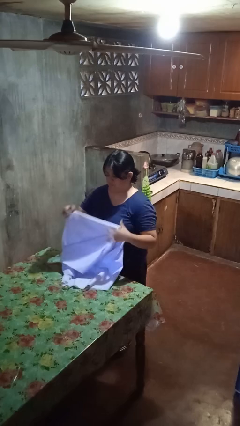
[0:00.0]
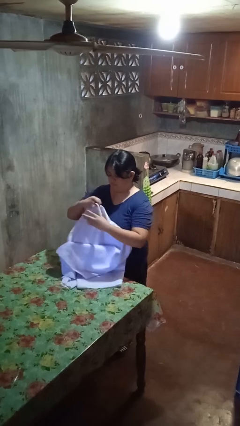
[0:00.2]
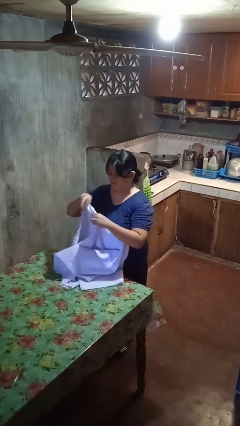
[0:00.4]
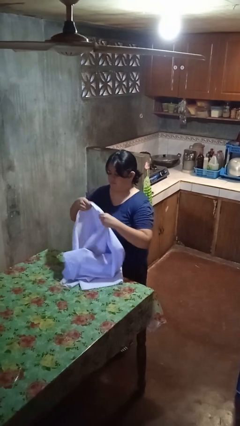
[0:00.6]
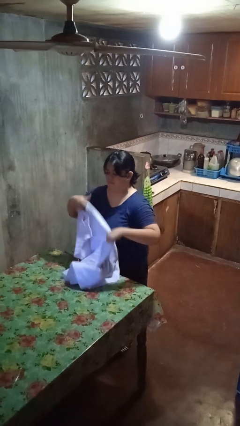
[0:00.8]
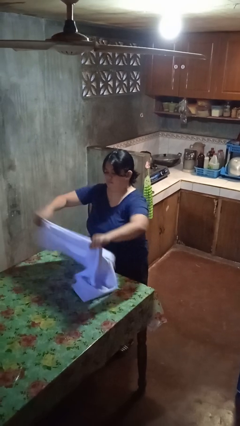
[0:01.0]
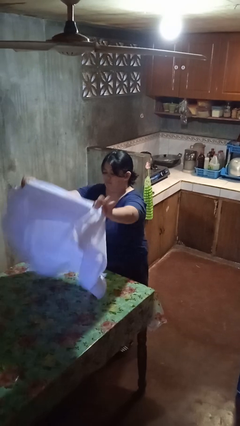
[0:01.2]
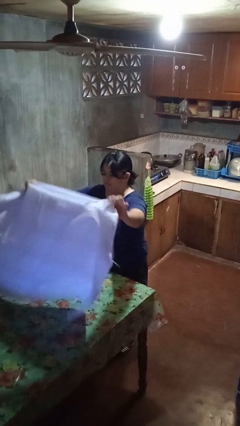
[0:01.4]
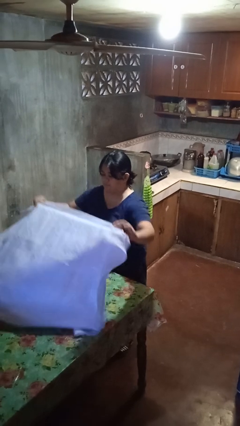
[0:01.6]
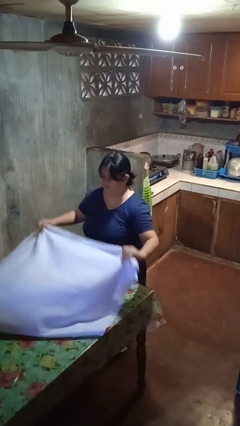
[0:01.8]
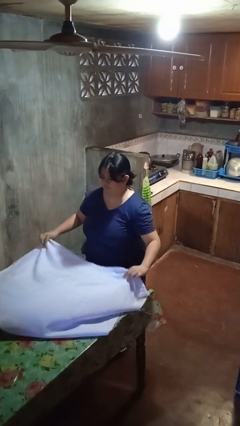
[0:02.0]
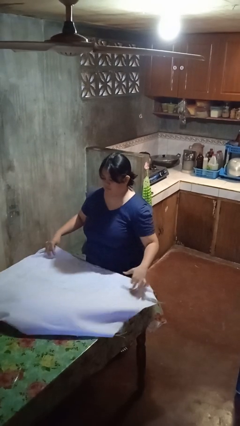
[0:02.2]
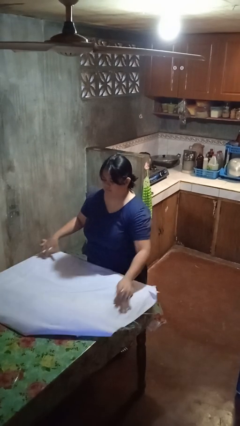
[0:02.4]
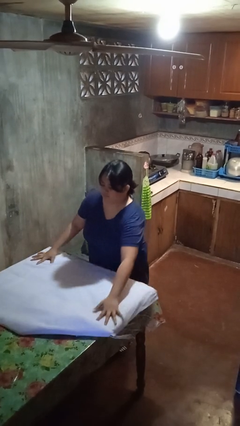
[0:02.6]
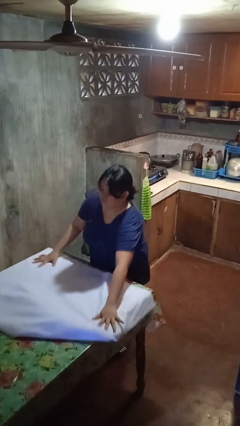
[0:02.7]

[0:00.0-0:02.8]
person spreads tablecloth

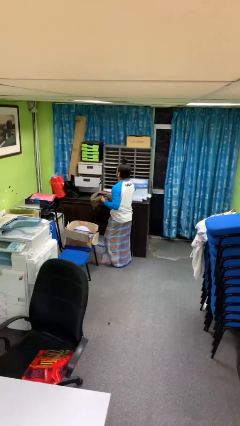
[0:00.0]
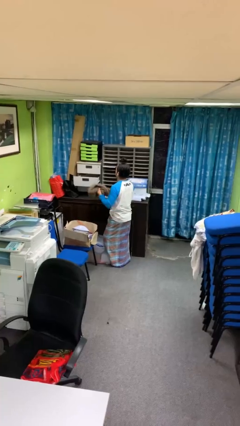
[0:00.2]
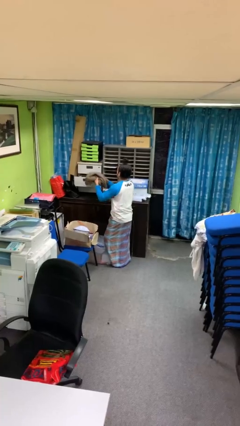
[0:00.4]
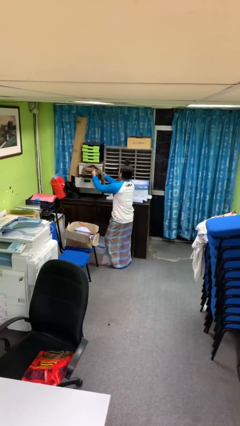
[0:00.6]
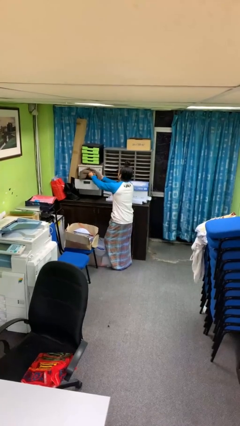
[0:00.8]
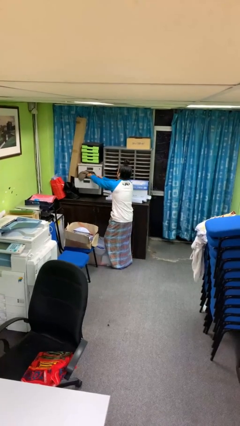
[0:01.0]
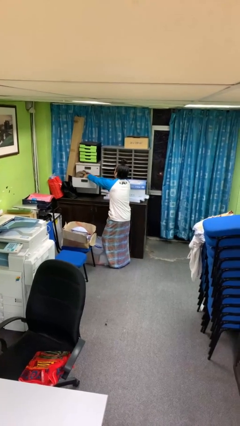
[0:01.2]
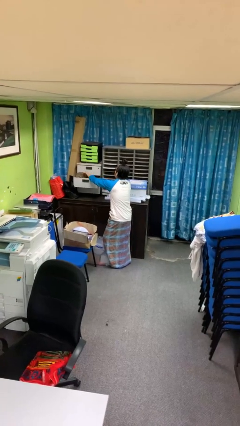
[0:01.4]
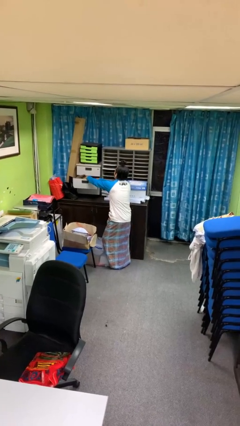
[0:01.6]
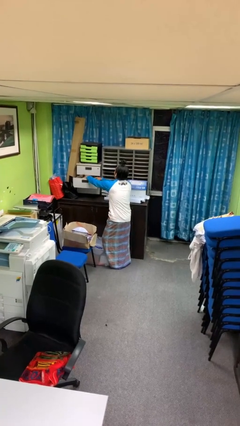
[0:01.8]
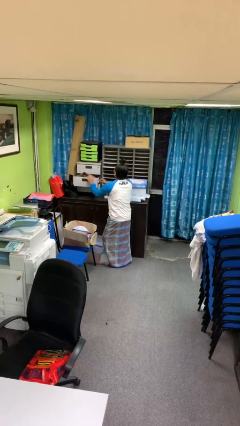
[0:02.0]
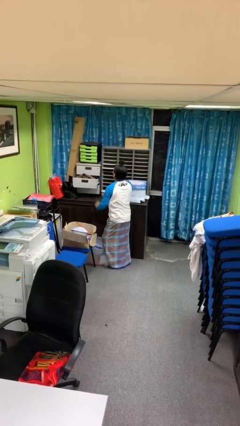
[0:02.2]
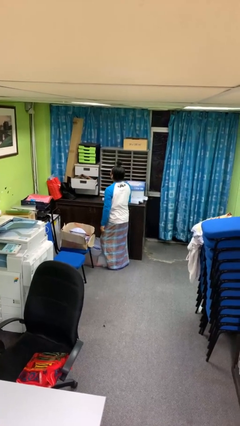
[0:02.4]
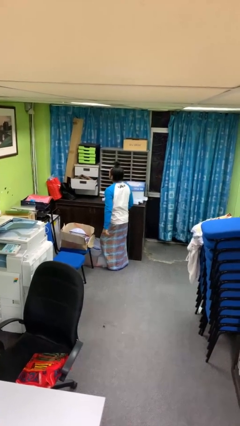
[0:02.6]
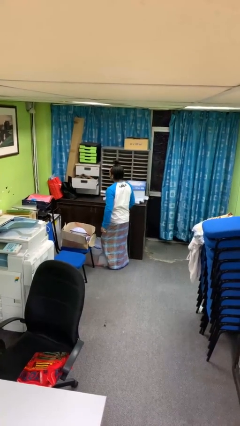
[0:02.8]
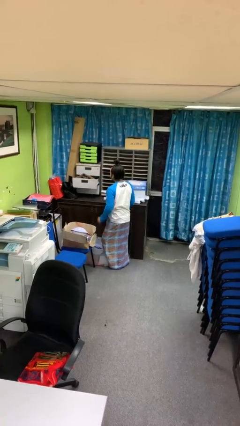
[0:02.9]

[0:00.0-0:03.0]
person puts clothes into dresser

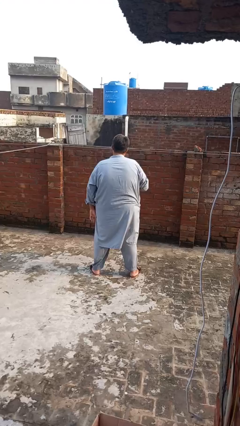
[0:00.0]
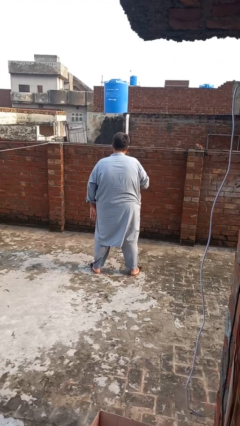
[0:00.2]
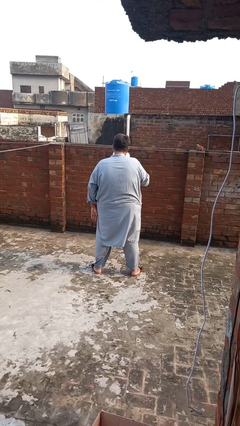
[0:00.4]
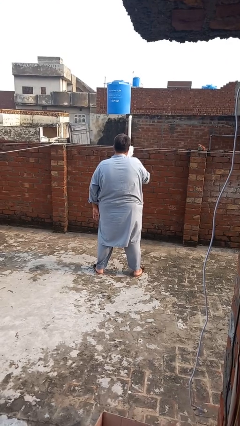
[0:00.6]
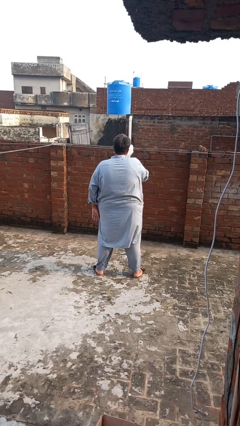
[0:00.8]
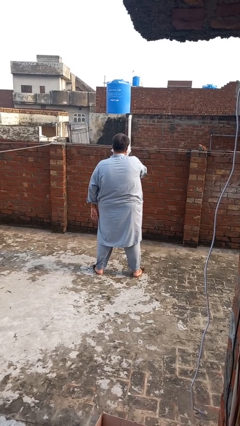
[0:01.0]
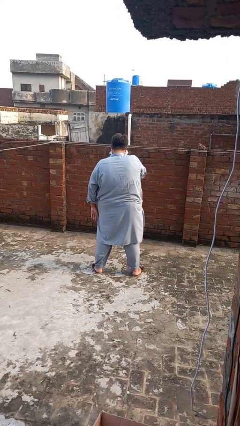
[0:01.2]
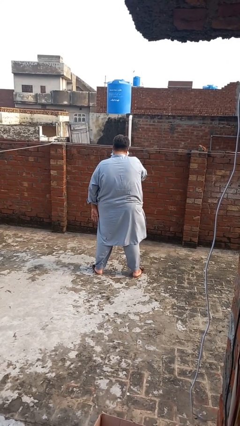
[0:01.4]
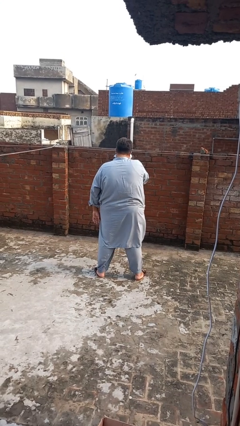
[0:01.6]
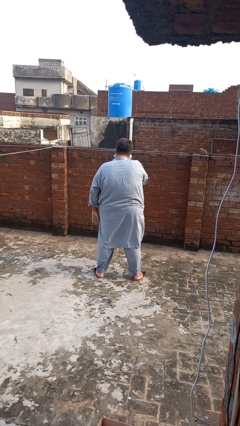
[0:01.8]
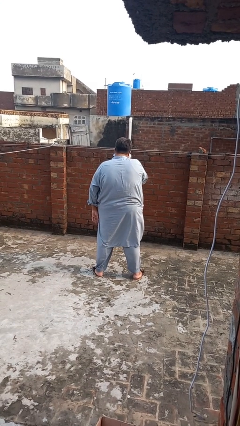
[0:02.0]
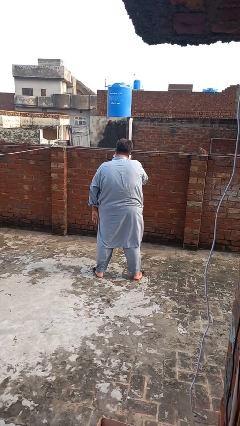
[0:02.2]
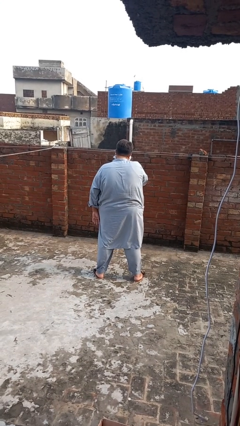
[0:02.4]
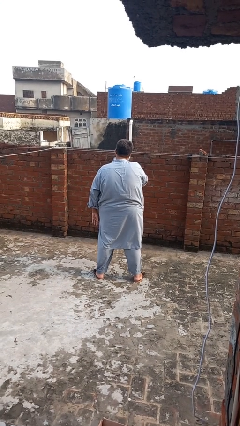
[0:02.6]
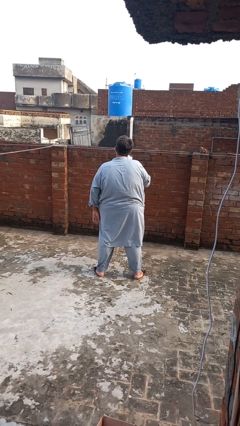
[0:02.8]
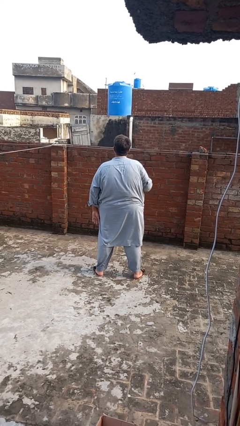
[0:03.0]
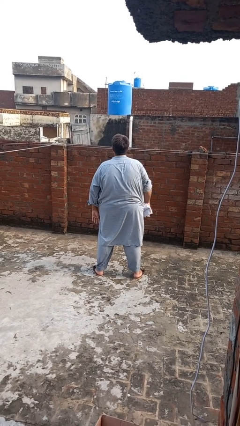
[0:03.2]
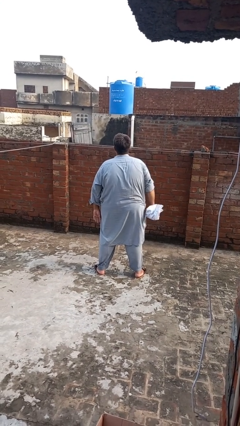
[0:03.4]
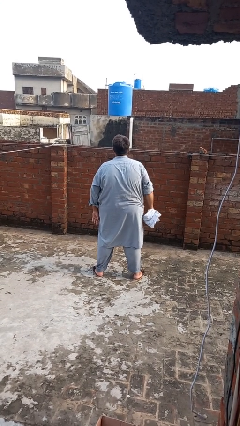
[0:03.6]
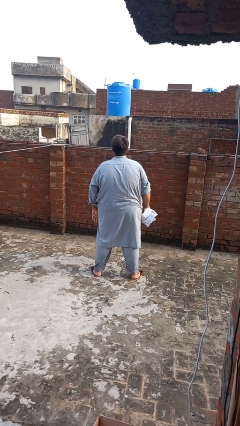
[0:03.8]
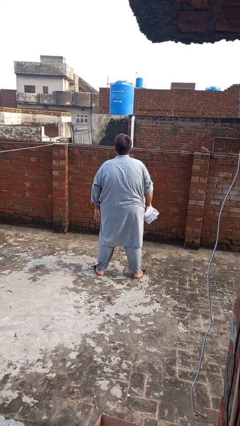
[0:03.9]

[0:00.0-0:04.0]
person blows nose

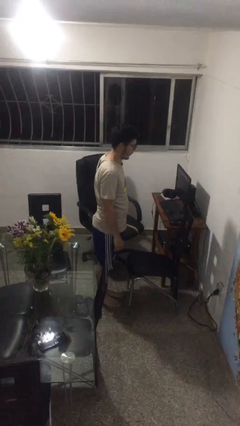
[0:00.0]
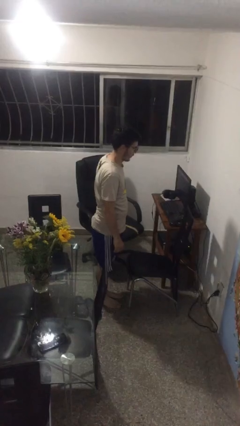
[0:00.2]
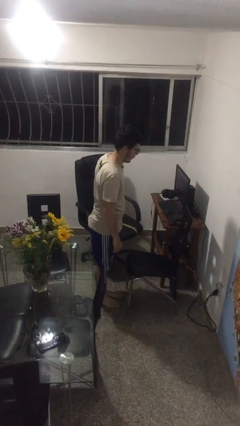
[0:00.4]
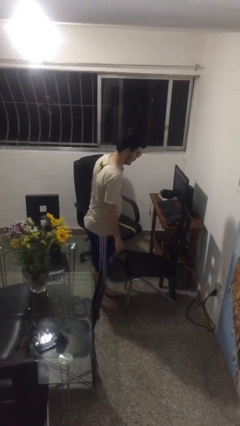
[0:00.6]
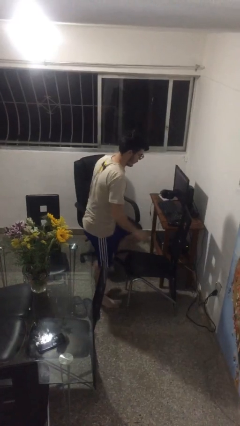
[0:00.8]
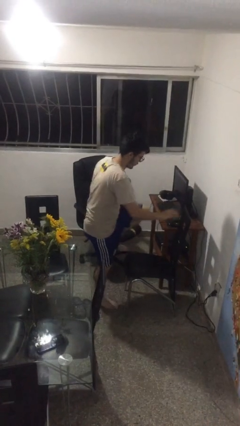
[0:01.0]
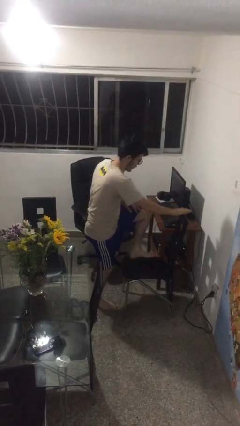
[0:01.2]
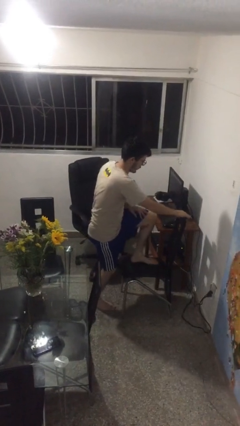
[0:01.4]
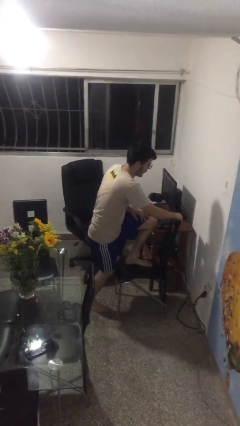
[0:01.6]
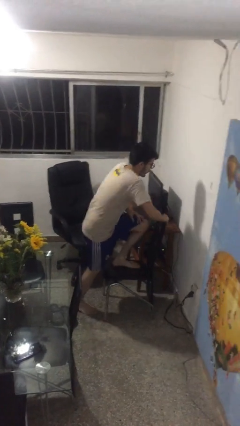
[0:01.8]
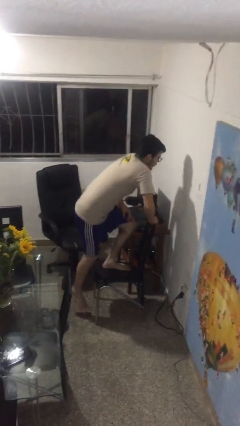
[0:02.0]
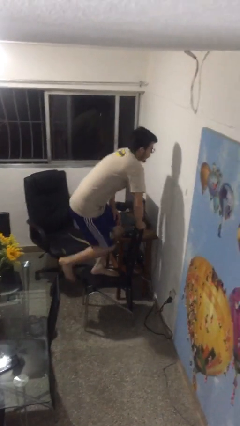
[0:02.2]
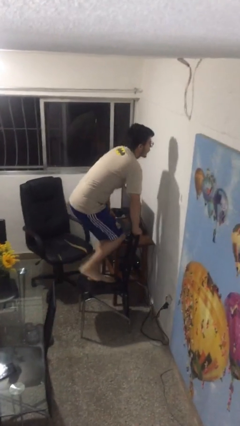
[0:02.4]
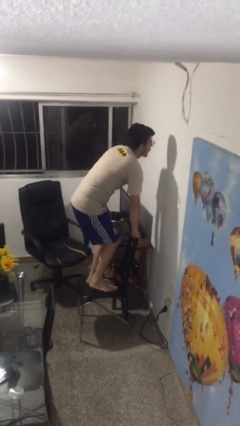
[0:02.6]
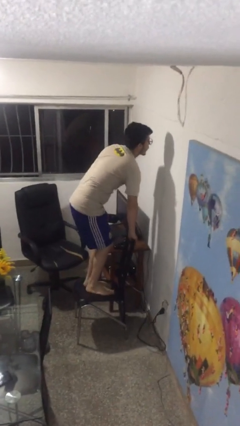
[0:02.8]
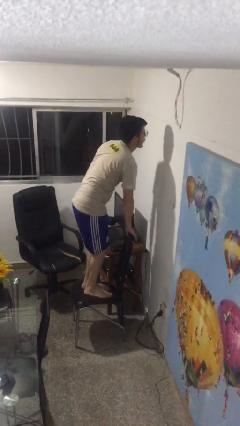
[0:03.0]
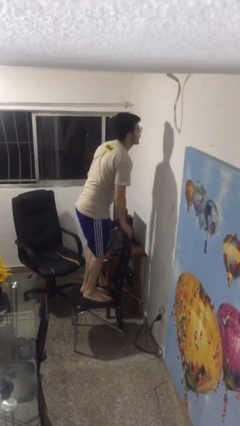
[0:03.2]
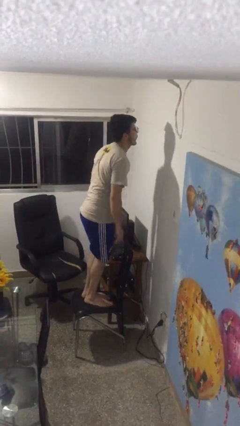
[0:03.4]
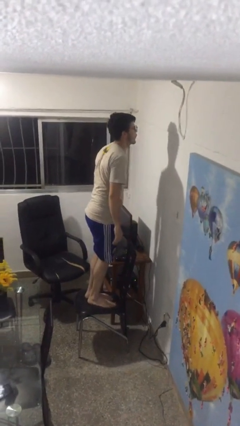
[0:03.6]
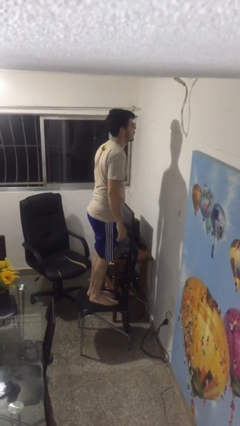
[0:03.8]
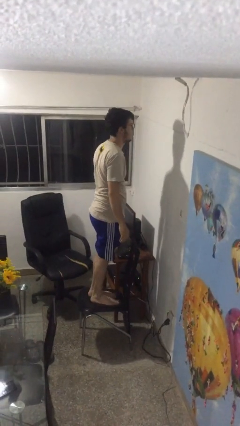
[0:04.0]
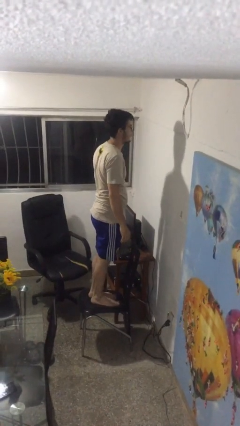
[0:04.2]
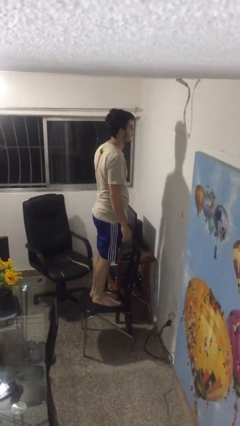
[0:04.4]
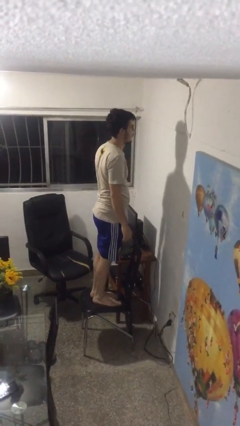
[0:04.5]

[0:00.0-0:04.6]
person climbs on chair

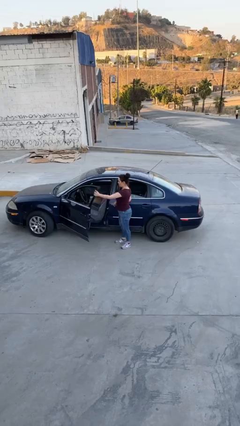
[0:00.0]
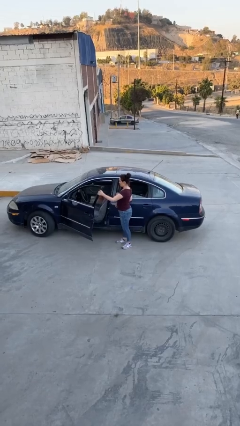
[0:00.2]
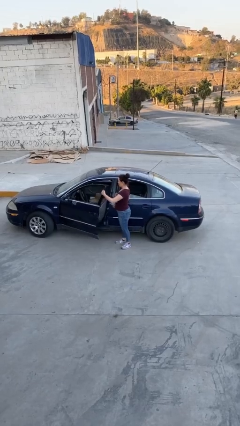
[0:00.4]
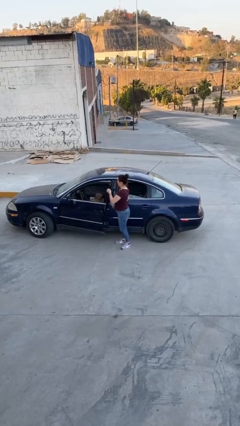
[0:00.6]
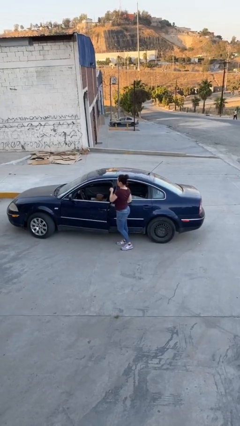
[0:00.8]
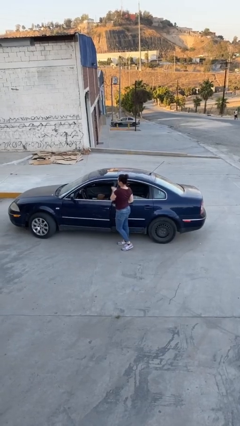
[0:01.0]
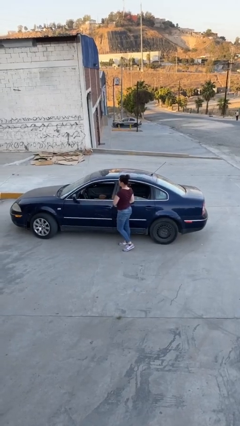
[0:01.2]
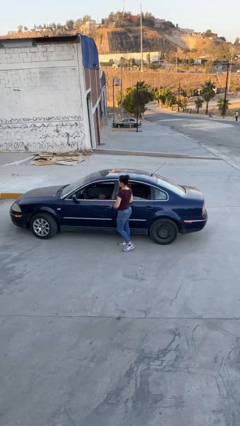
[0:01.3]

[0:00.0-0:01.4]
person closes car door

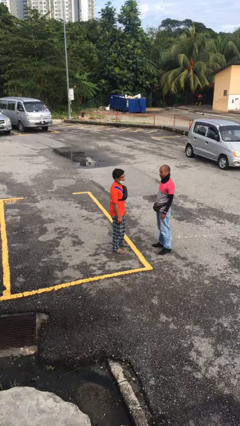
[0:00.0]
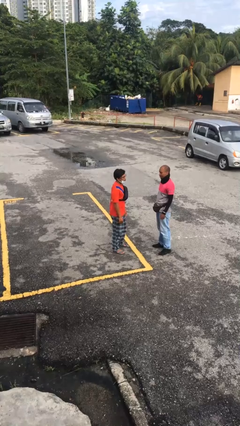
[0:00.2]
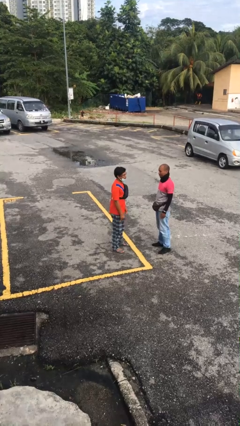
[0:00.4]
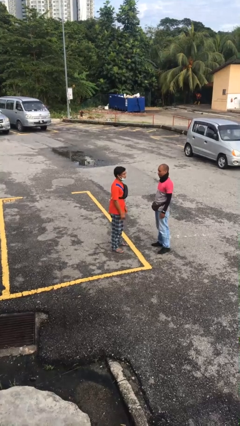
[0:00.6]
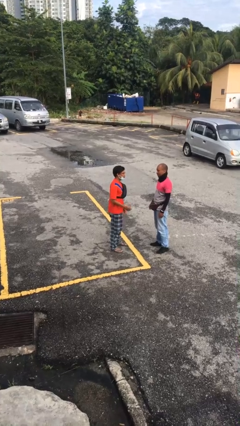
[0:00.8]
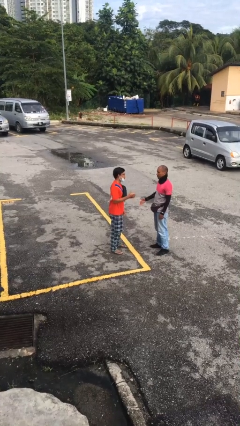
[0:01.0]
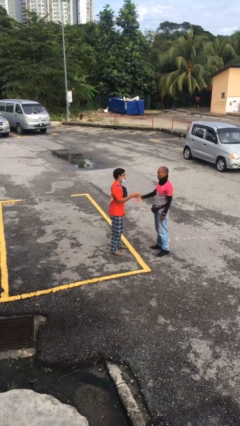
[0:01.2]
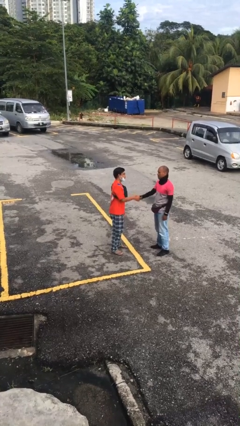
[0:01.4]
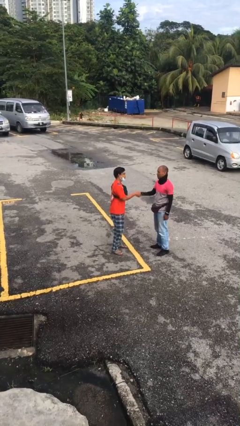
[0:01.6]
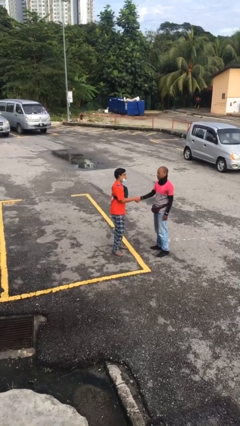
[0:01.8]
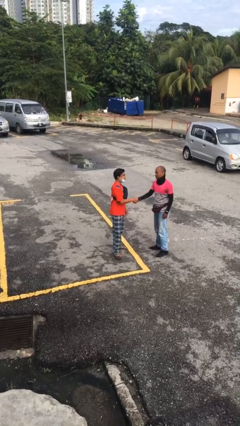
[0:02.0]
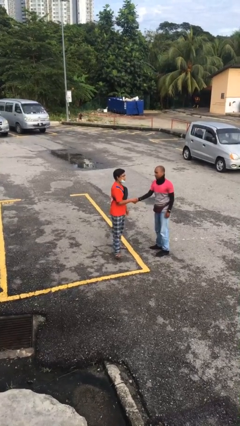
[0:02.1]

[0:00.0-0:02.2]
person shakes hand
